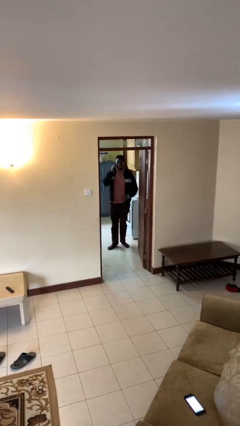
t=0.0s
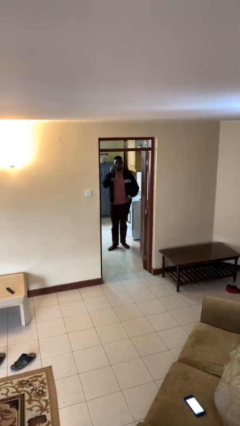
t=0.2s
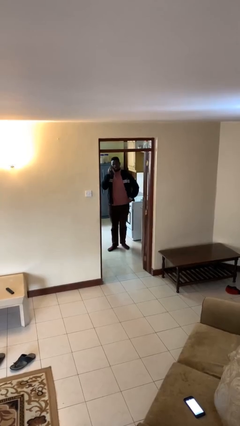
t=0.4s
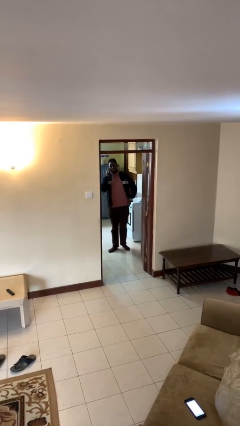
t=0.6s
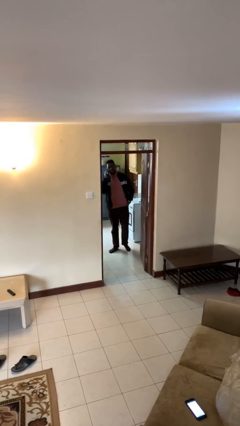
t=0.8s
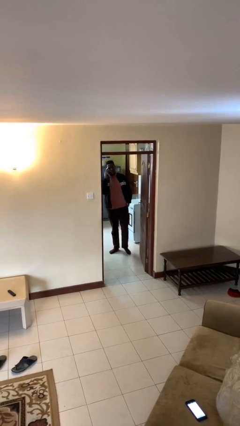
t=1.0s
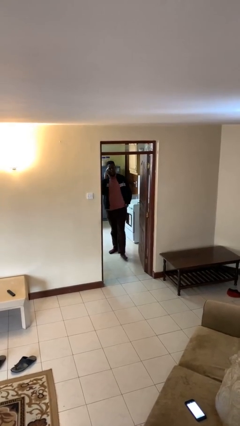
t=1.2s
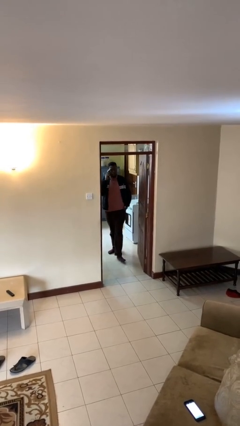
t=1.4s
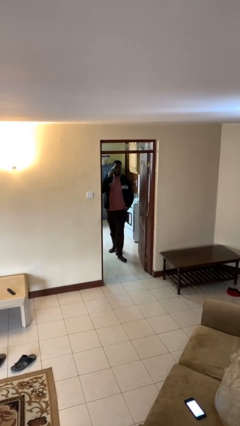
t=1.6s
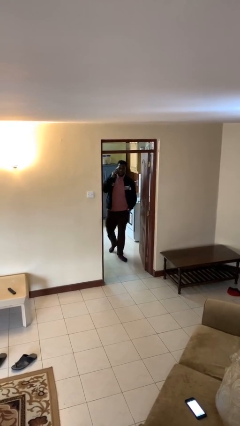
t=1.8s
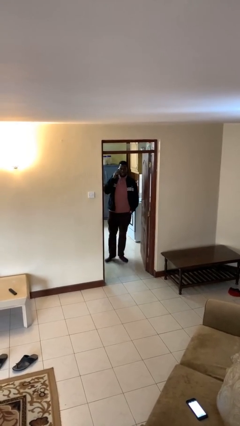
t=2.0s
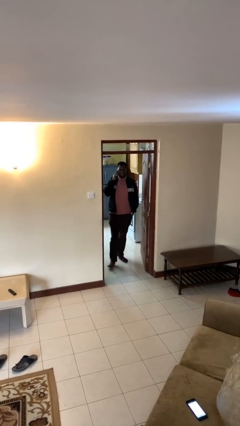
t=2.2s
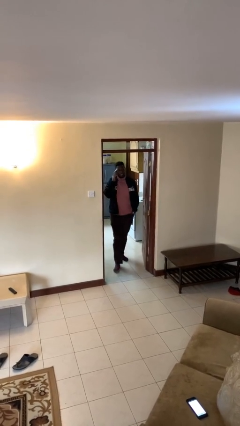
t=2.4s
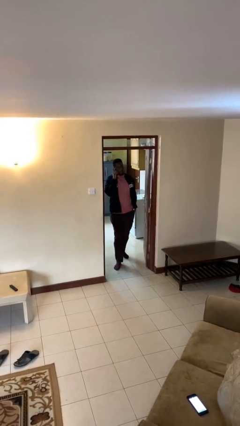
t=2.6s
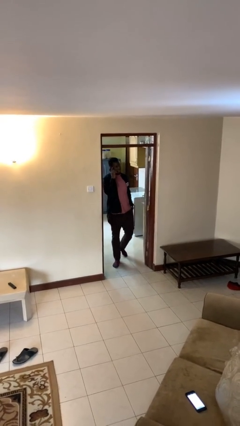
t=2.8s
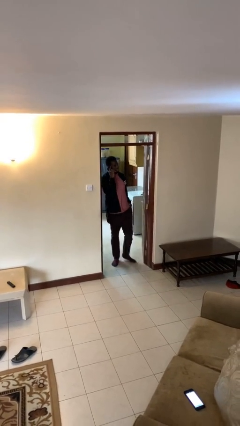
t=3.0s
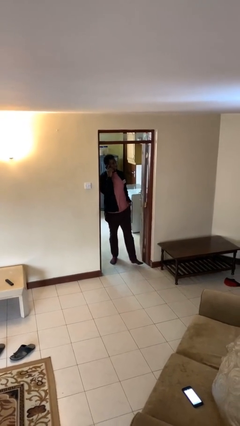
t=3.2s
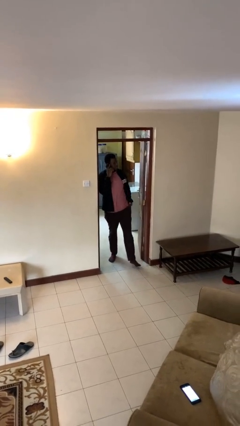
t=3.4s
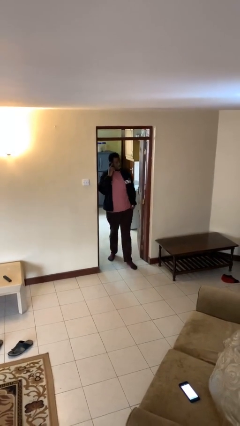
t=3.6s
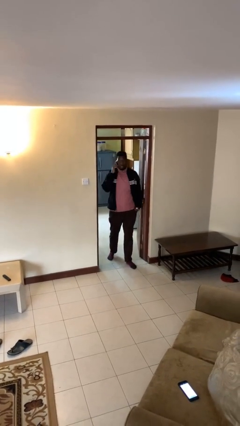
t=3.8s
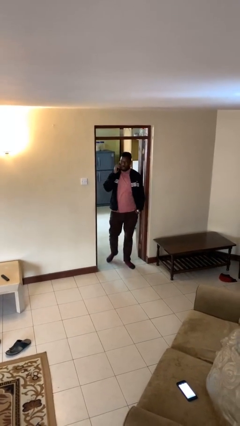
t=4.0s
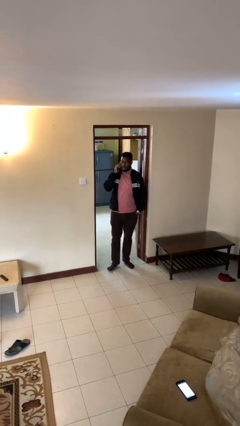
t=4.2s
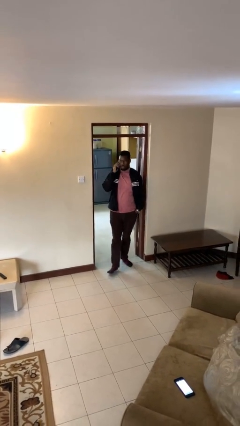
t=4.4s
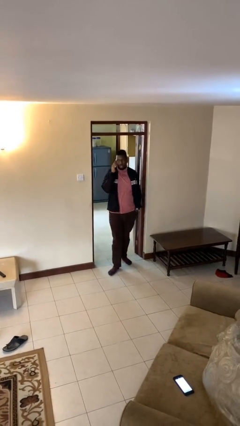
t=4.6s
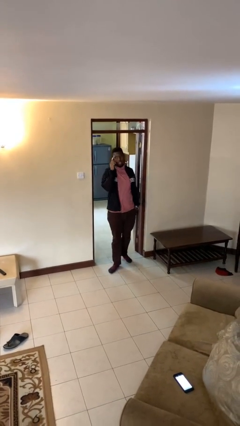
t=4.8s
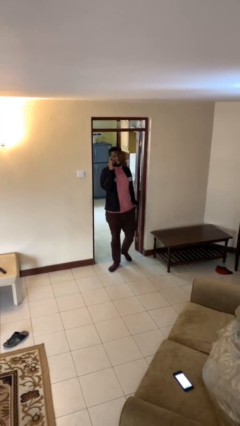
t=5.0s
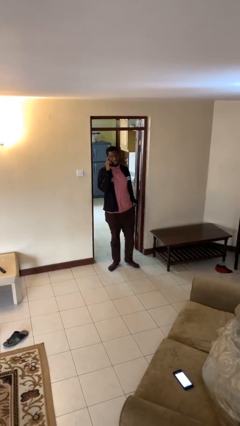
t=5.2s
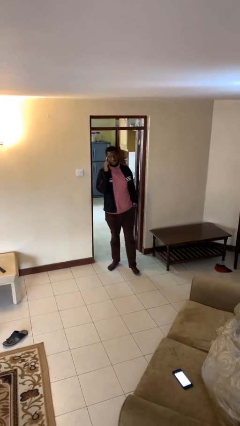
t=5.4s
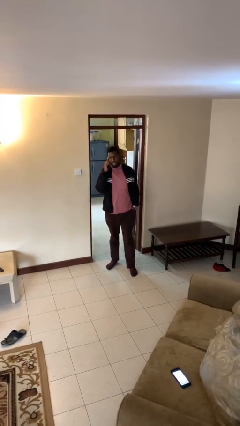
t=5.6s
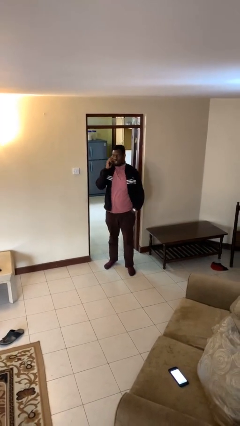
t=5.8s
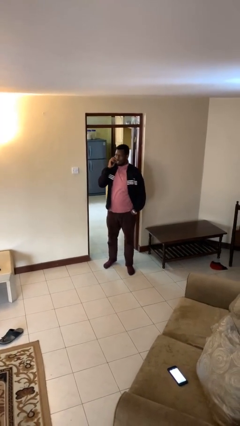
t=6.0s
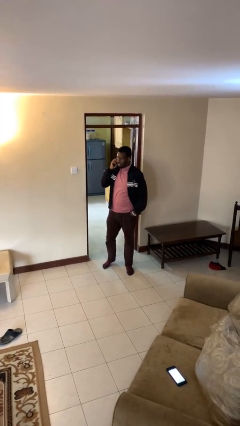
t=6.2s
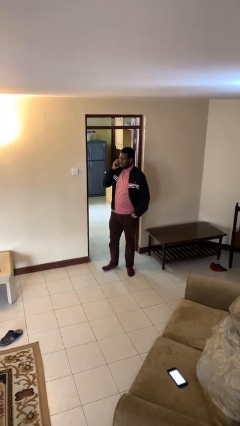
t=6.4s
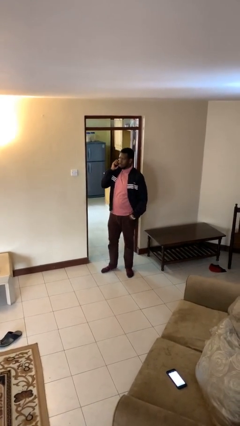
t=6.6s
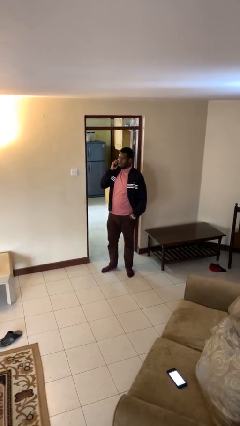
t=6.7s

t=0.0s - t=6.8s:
person enters scene through structure

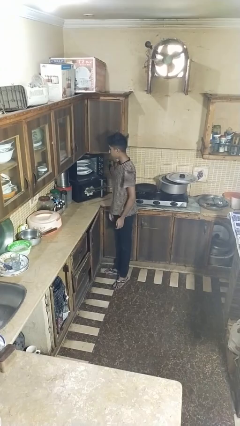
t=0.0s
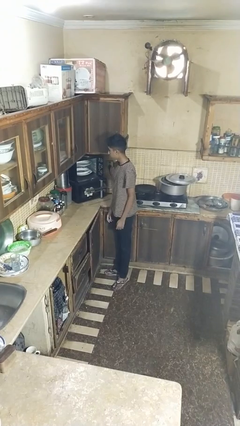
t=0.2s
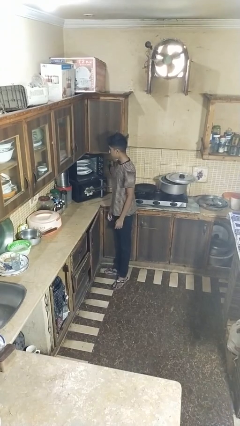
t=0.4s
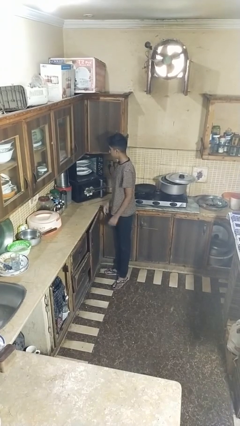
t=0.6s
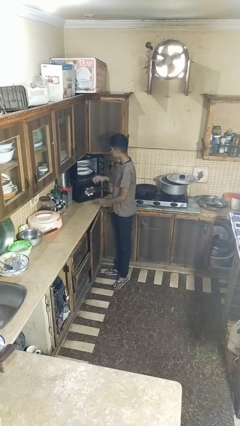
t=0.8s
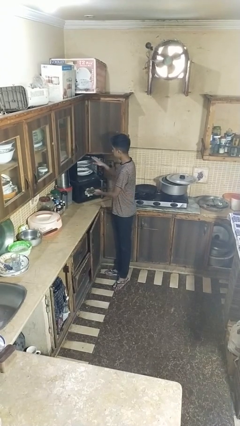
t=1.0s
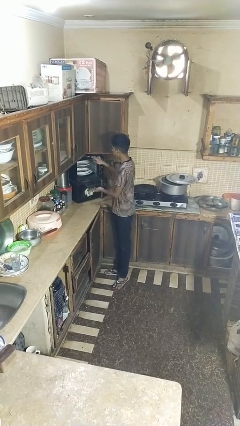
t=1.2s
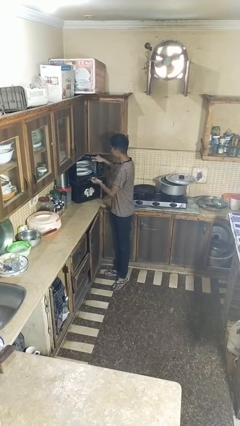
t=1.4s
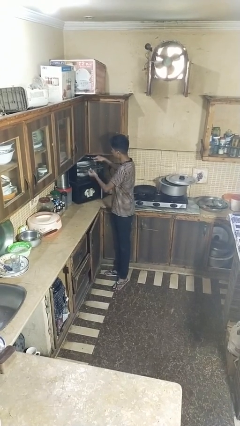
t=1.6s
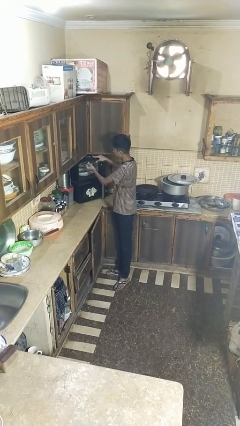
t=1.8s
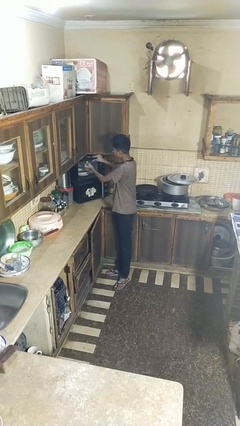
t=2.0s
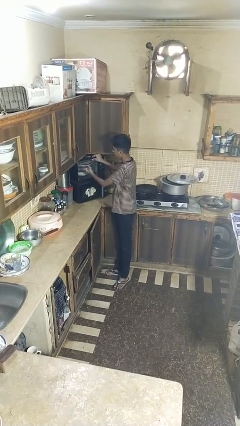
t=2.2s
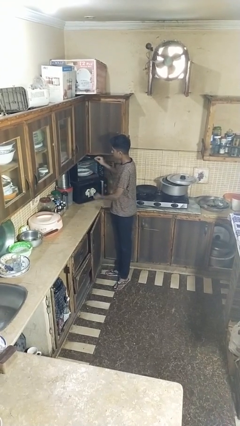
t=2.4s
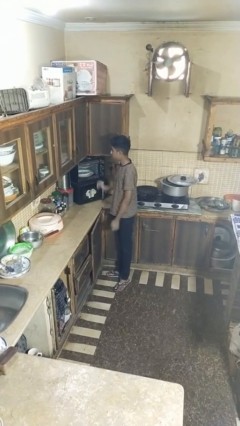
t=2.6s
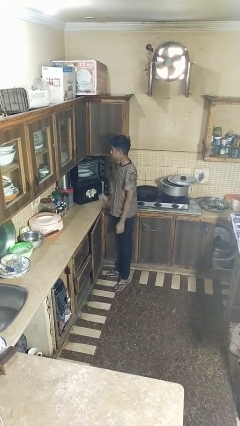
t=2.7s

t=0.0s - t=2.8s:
person closes dishwasher

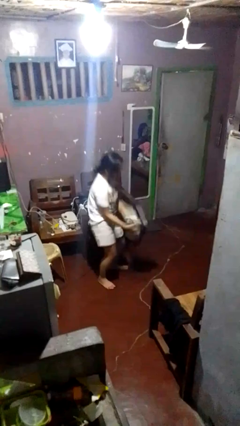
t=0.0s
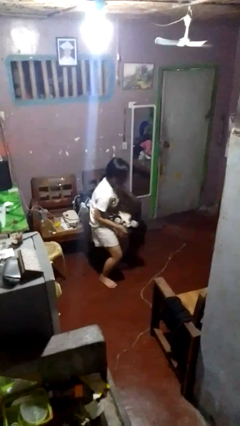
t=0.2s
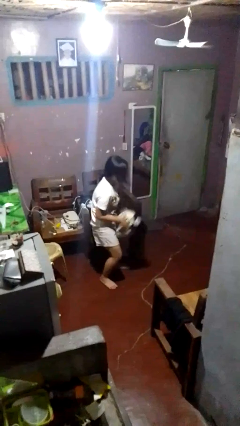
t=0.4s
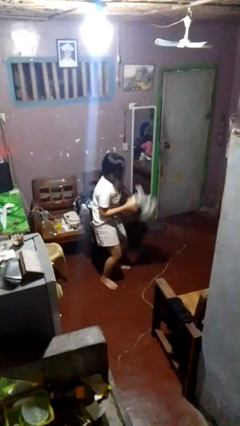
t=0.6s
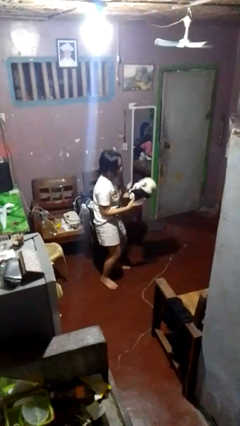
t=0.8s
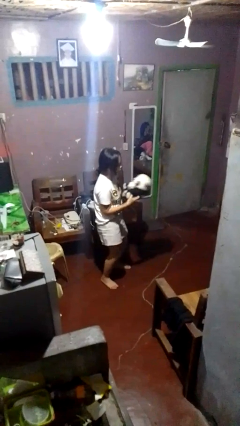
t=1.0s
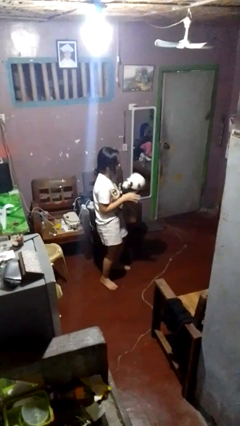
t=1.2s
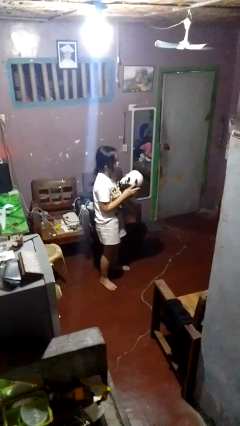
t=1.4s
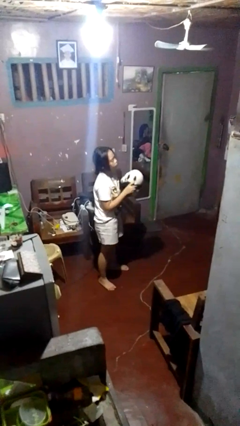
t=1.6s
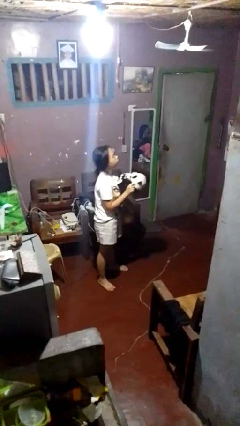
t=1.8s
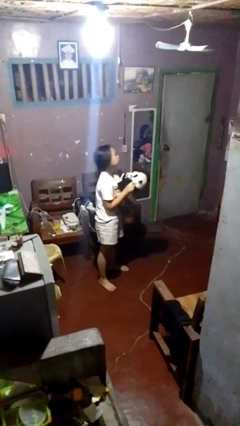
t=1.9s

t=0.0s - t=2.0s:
person catches dropped object

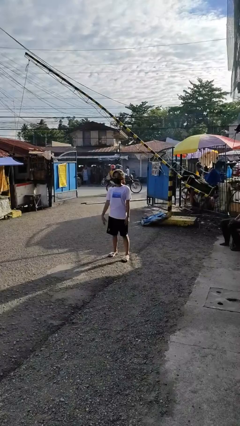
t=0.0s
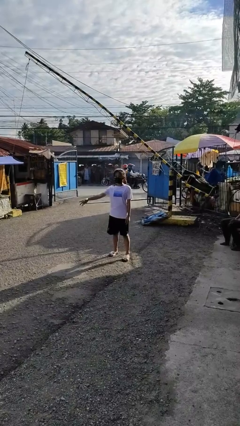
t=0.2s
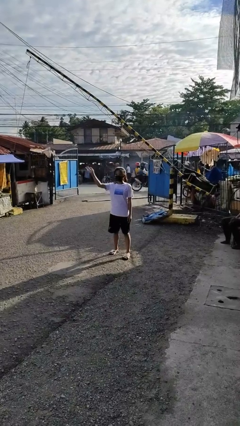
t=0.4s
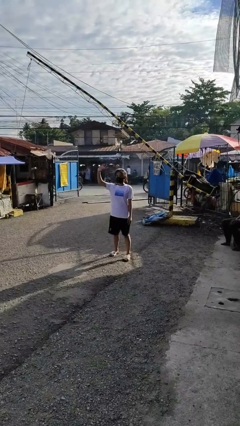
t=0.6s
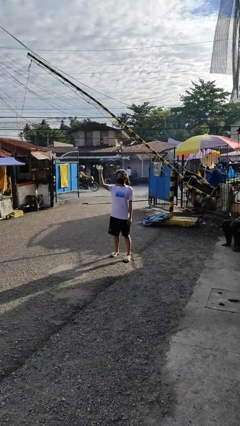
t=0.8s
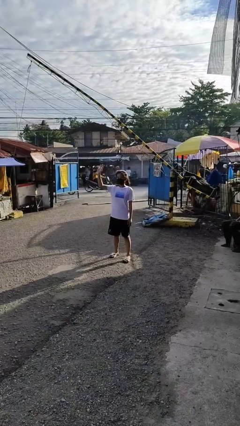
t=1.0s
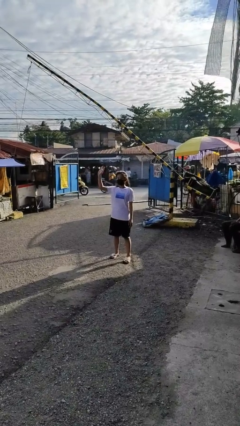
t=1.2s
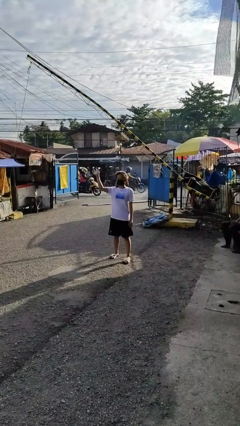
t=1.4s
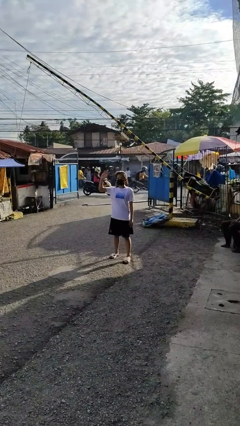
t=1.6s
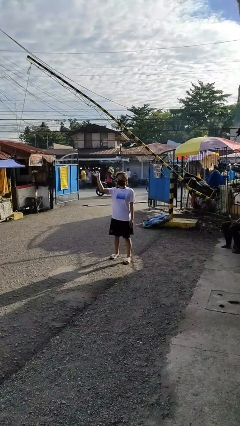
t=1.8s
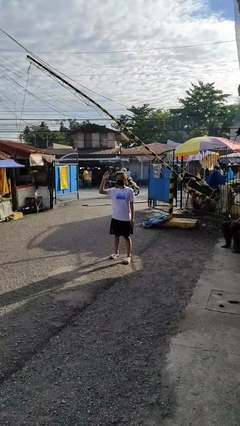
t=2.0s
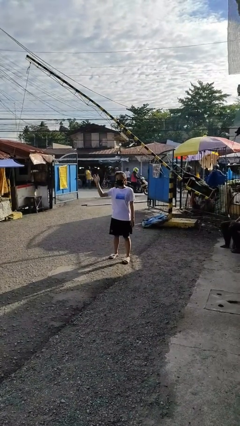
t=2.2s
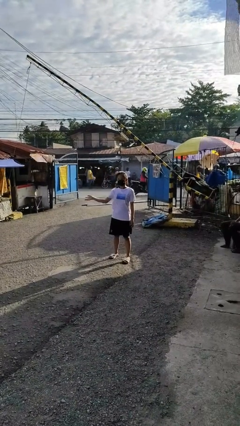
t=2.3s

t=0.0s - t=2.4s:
person waves at person

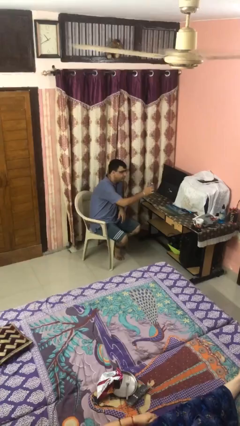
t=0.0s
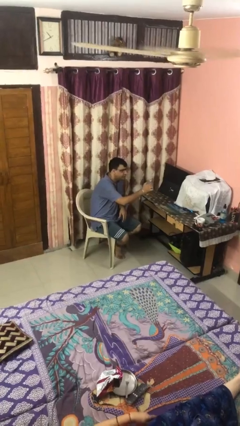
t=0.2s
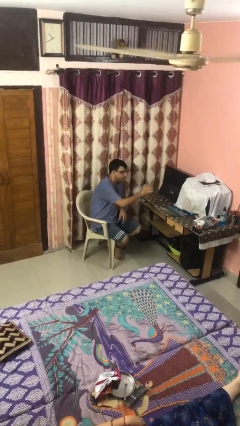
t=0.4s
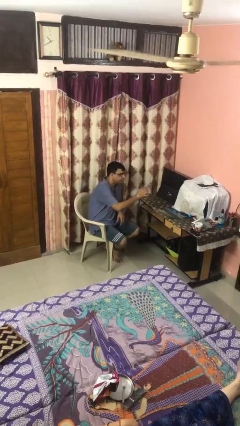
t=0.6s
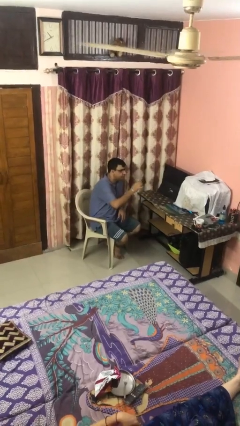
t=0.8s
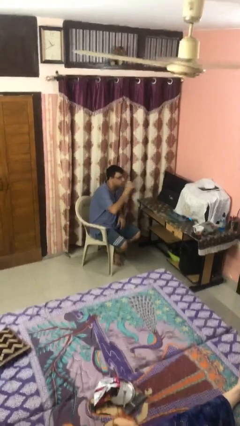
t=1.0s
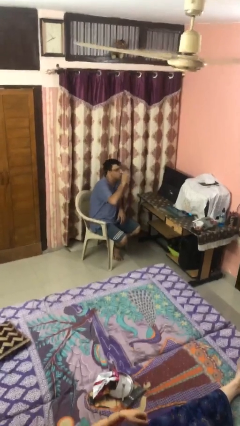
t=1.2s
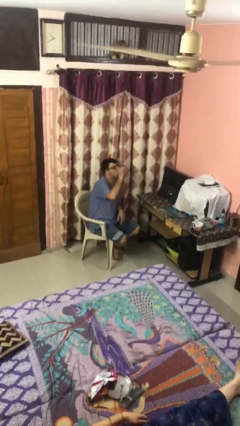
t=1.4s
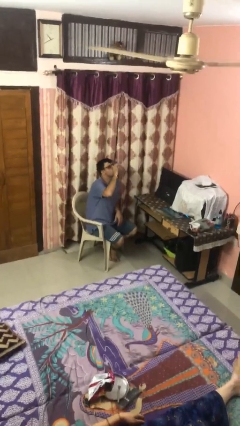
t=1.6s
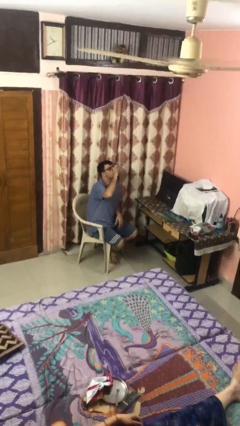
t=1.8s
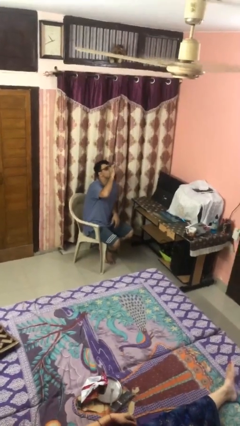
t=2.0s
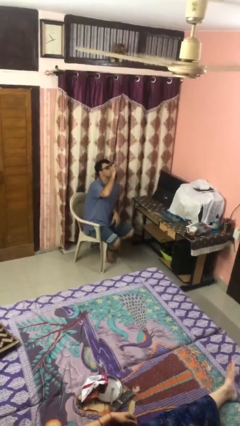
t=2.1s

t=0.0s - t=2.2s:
person drinks from shotglass

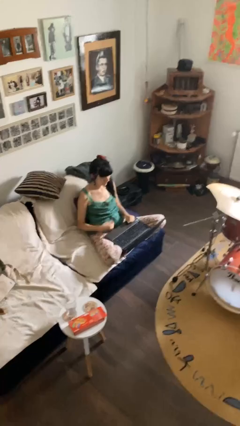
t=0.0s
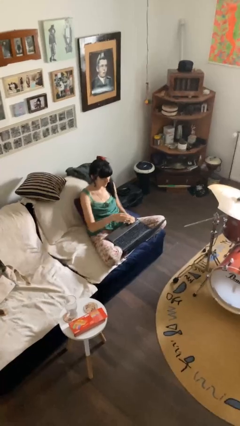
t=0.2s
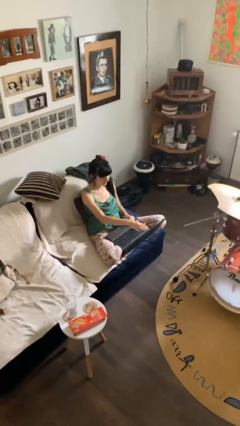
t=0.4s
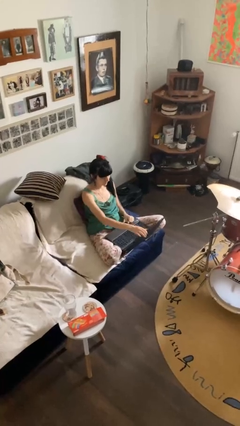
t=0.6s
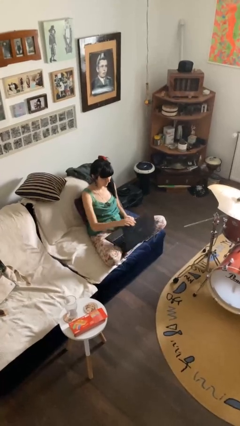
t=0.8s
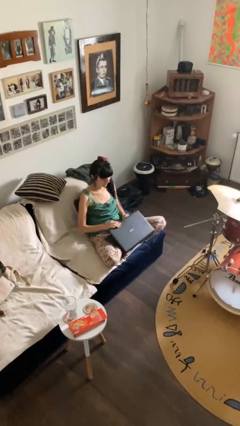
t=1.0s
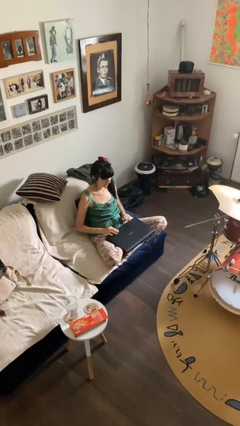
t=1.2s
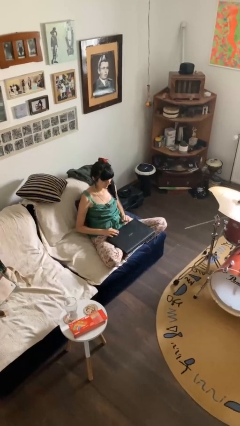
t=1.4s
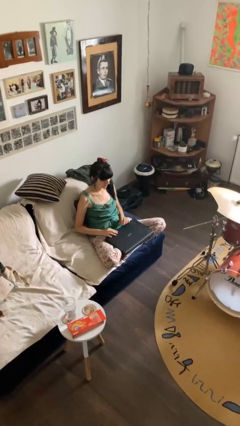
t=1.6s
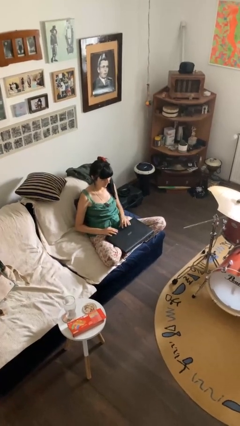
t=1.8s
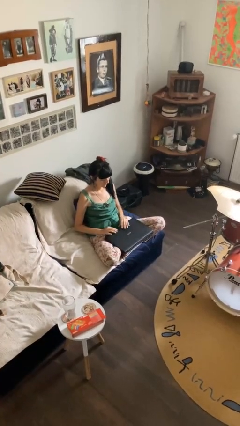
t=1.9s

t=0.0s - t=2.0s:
person closes laptop
